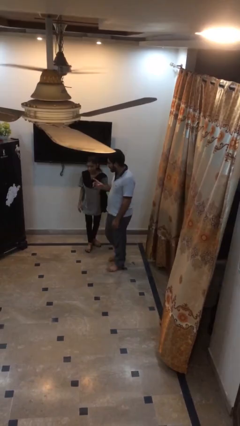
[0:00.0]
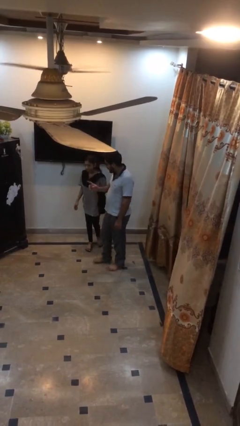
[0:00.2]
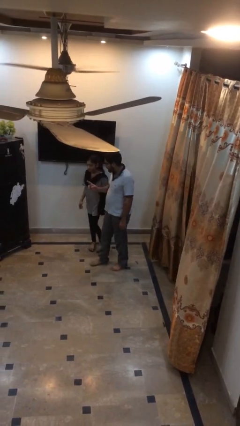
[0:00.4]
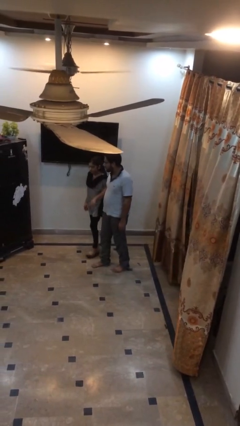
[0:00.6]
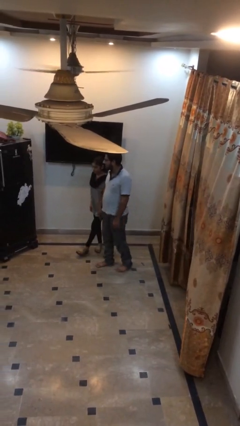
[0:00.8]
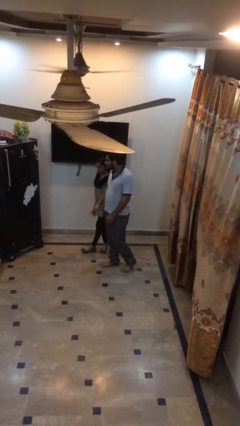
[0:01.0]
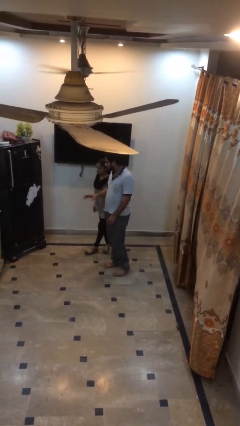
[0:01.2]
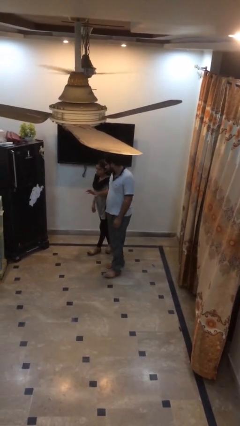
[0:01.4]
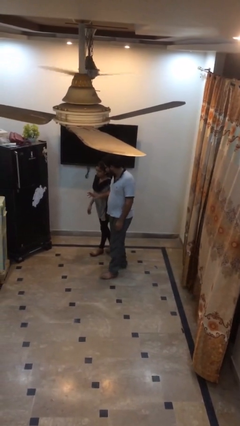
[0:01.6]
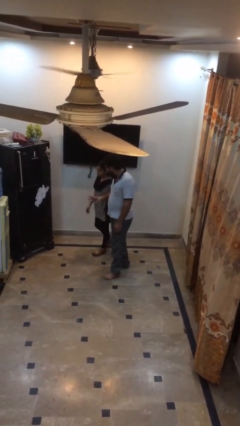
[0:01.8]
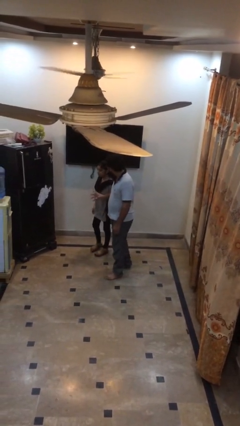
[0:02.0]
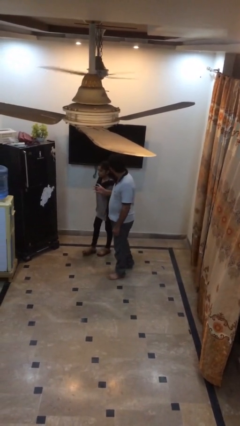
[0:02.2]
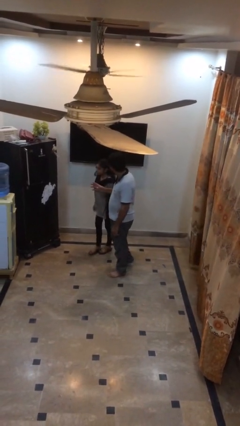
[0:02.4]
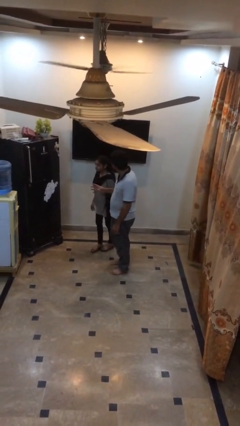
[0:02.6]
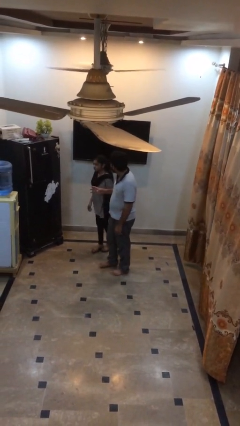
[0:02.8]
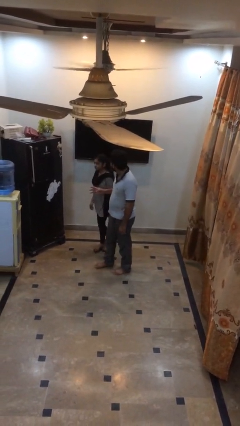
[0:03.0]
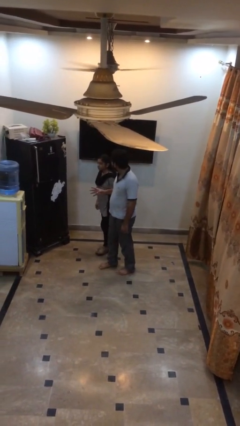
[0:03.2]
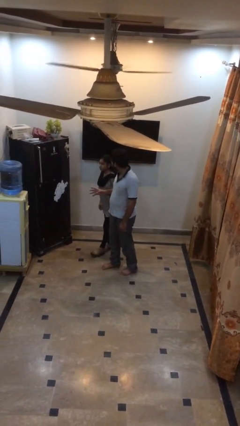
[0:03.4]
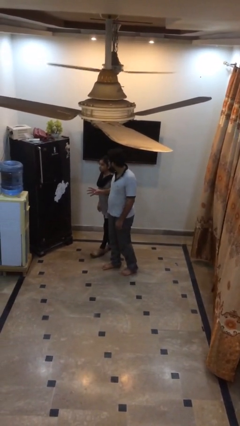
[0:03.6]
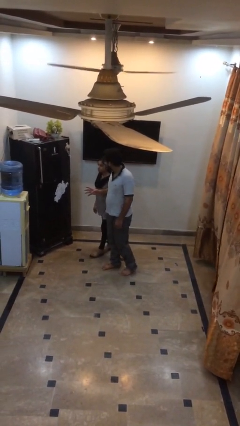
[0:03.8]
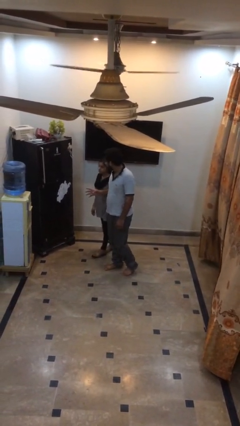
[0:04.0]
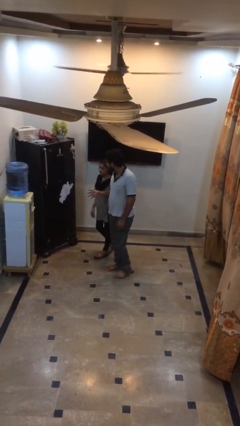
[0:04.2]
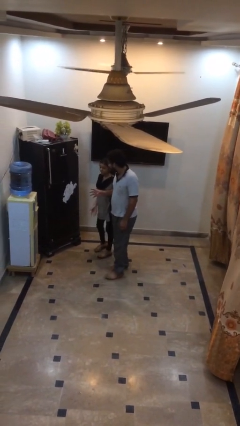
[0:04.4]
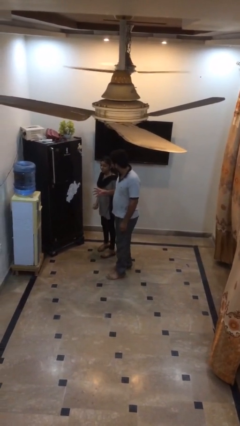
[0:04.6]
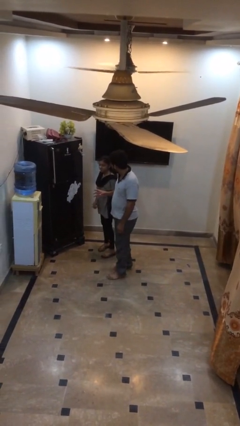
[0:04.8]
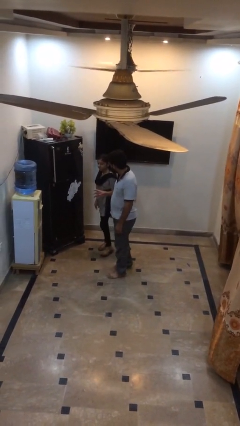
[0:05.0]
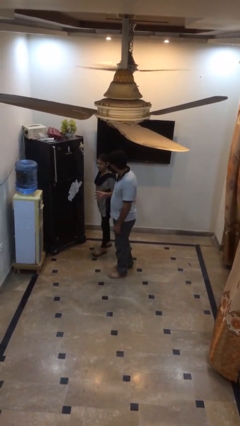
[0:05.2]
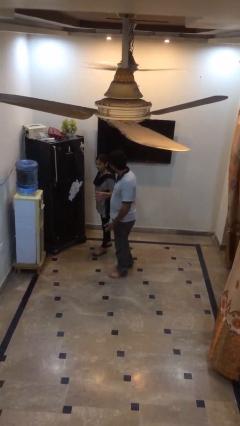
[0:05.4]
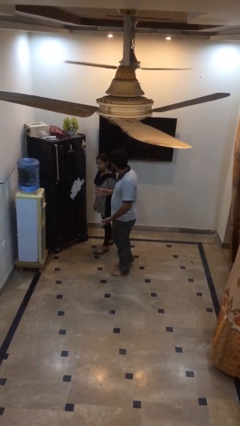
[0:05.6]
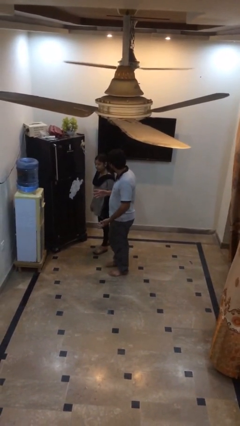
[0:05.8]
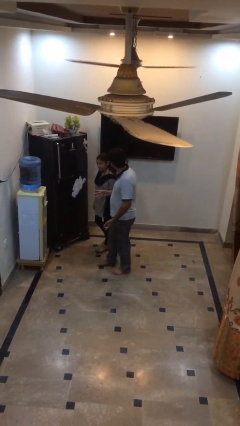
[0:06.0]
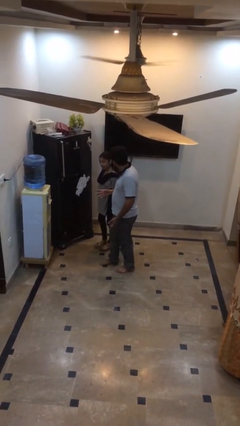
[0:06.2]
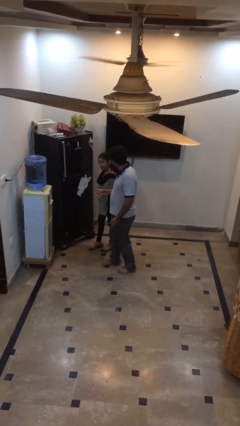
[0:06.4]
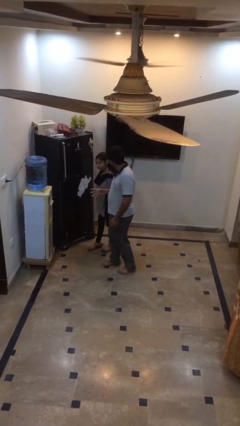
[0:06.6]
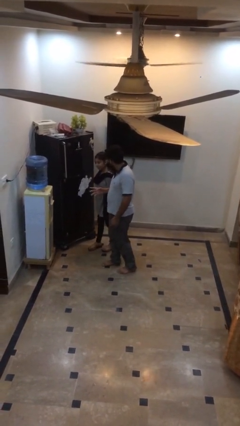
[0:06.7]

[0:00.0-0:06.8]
person talks to person

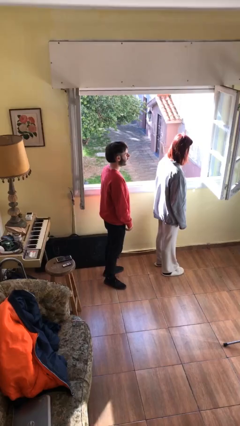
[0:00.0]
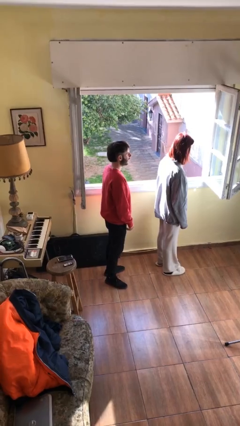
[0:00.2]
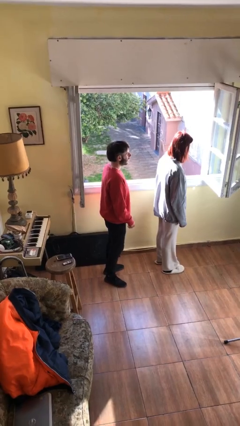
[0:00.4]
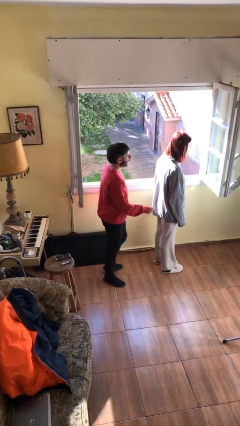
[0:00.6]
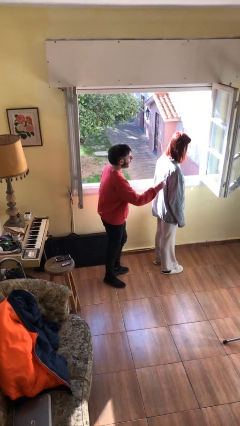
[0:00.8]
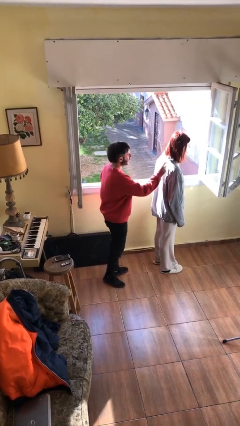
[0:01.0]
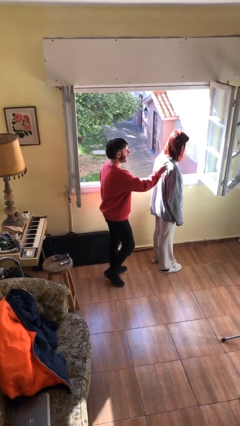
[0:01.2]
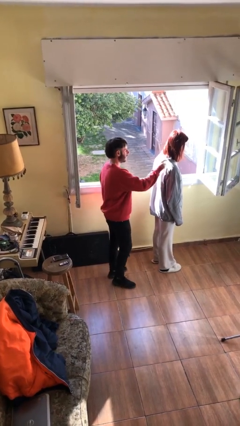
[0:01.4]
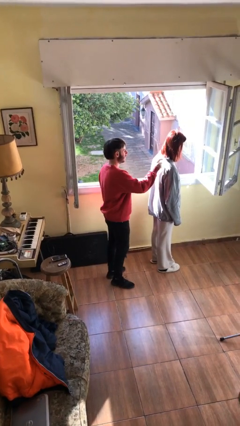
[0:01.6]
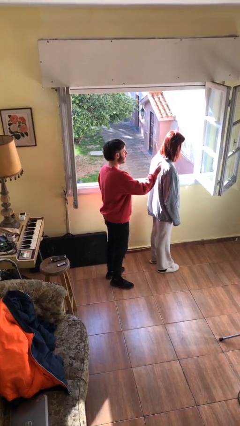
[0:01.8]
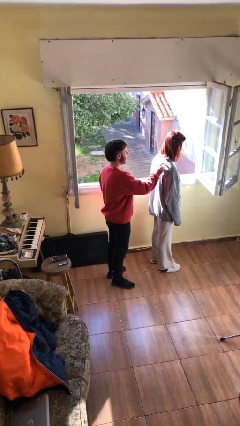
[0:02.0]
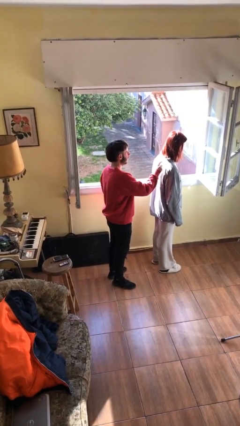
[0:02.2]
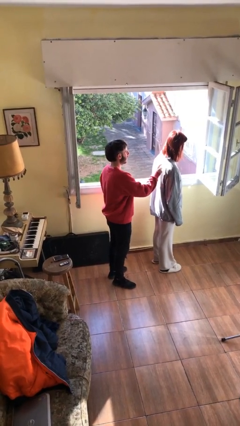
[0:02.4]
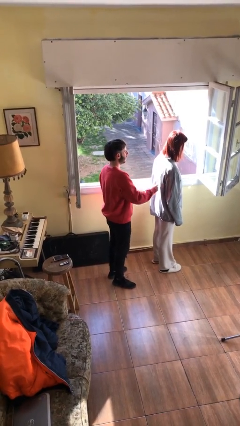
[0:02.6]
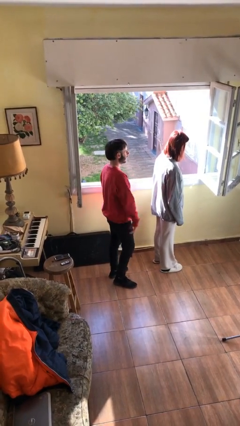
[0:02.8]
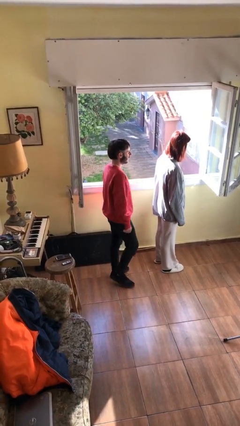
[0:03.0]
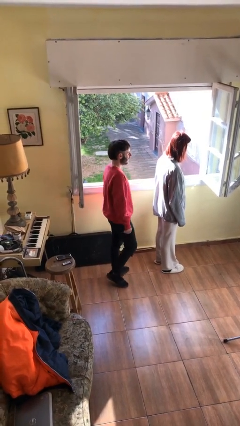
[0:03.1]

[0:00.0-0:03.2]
person touches back of person

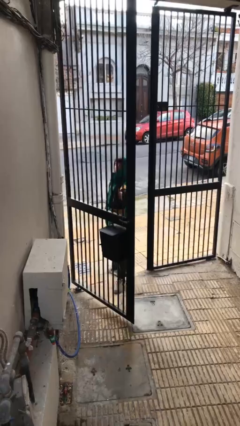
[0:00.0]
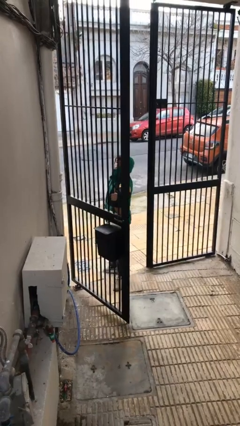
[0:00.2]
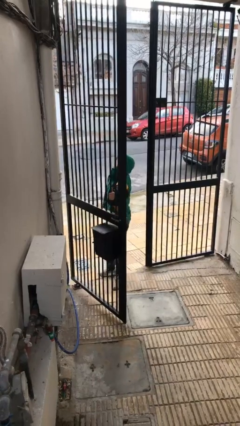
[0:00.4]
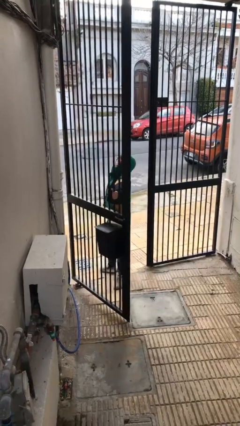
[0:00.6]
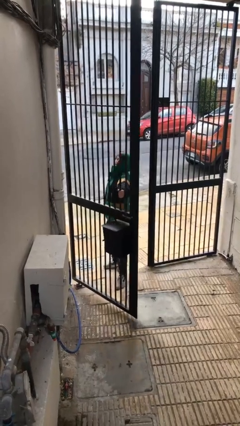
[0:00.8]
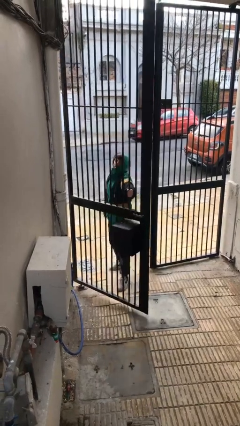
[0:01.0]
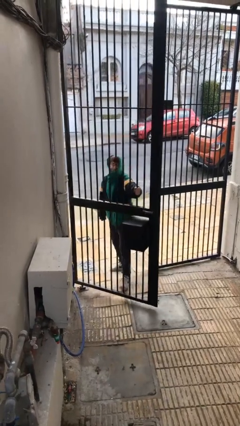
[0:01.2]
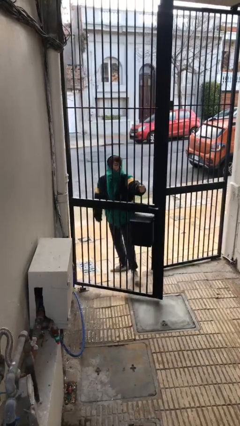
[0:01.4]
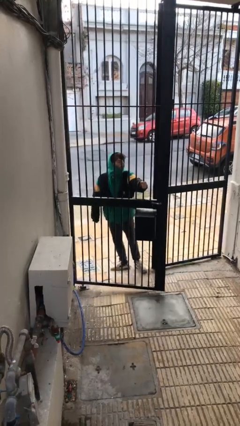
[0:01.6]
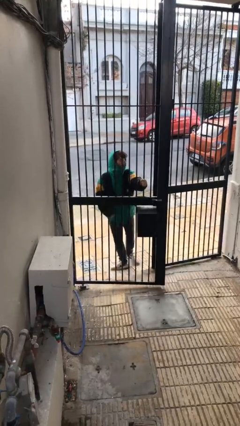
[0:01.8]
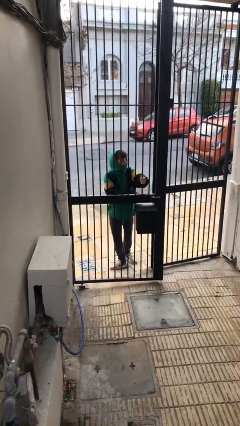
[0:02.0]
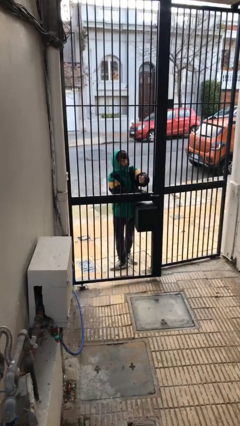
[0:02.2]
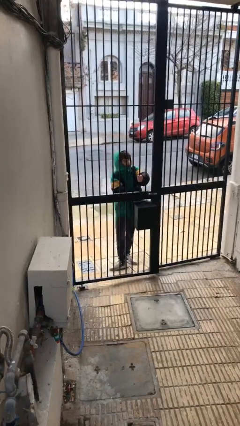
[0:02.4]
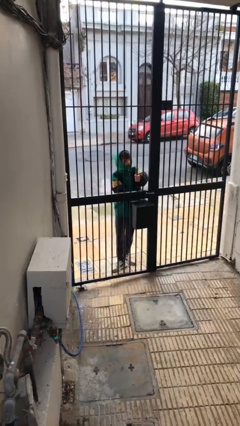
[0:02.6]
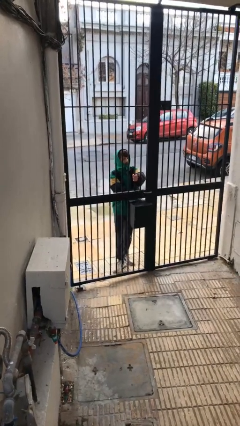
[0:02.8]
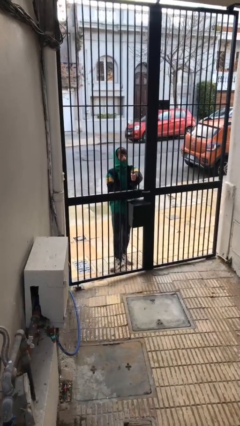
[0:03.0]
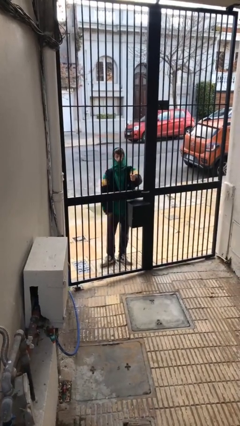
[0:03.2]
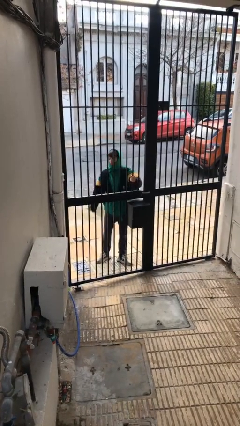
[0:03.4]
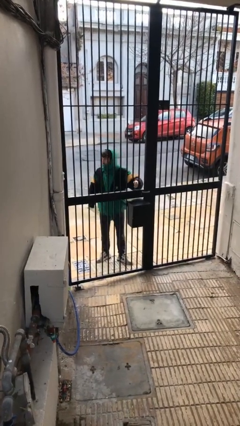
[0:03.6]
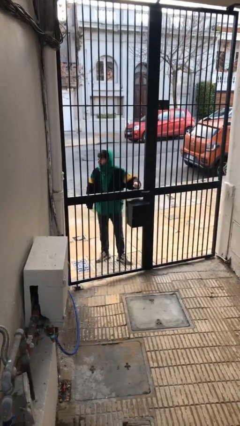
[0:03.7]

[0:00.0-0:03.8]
person closes gate

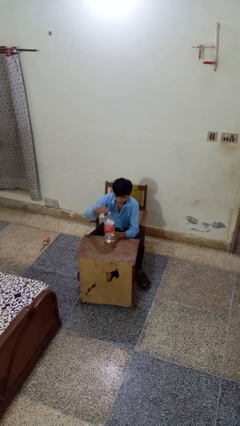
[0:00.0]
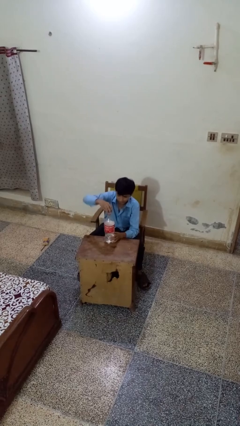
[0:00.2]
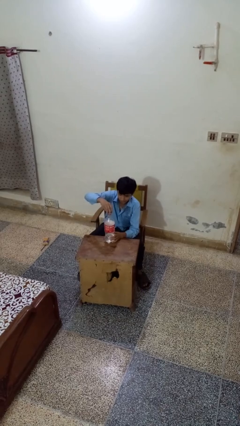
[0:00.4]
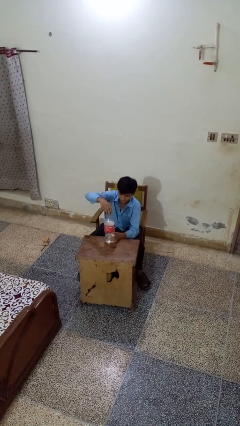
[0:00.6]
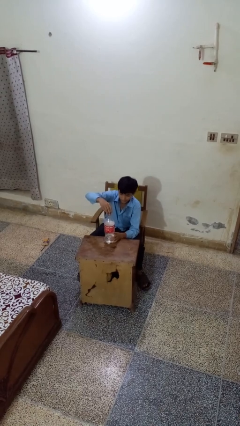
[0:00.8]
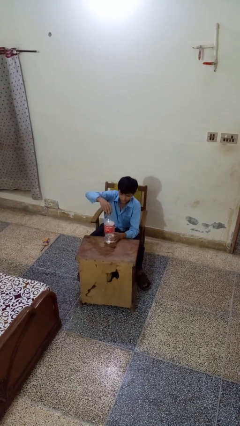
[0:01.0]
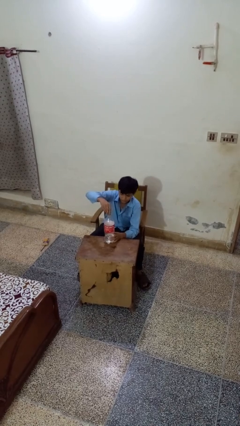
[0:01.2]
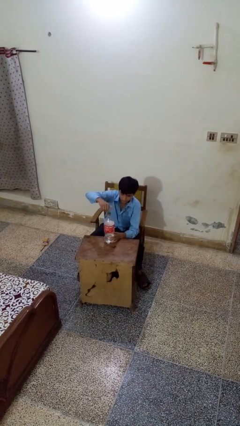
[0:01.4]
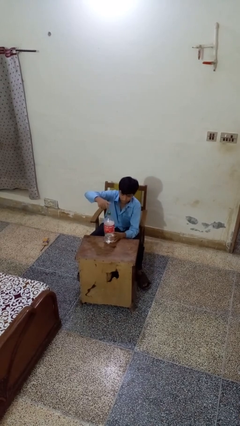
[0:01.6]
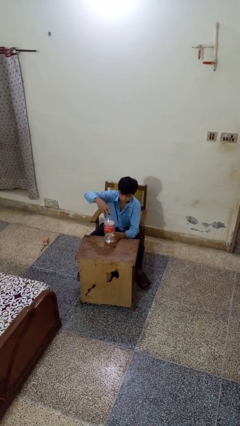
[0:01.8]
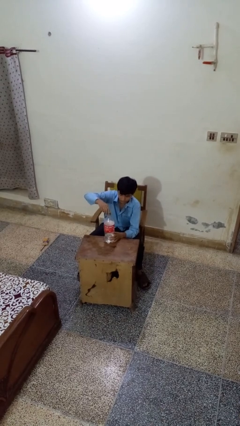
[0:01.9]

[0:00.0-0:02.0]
person screws lid to bottle

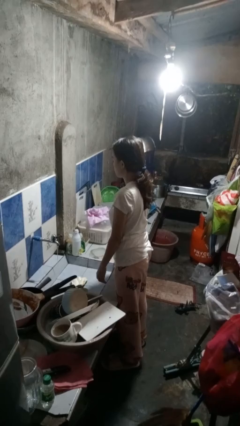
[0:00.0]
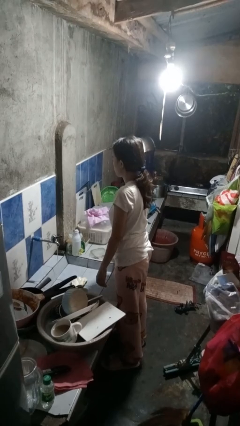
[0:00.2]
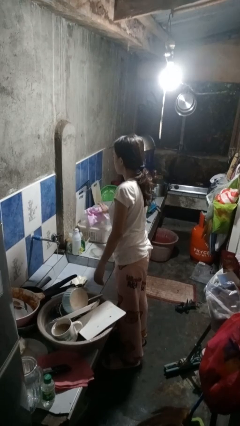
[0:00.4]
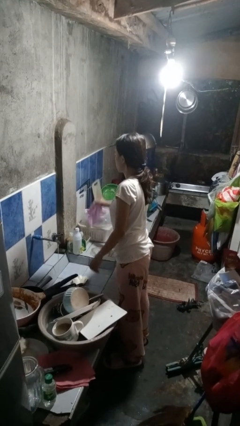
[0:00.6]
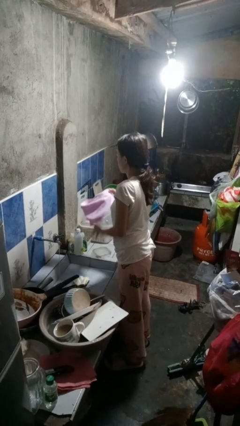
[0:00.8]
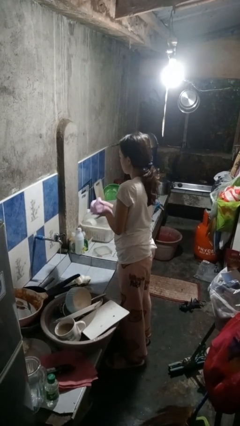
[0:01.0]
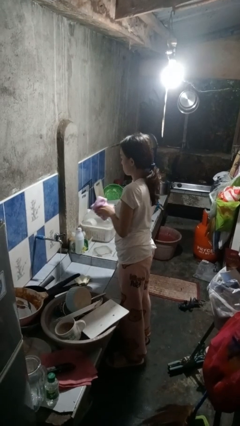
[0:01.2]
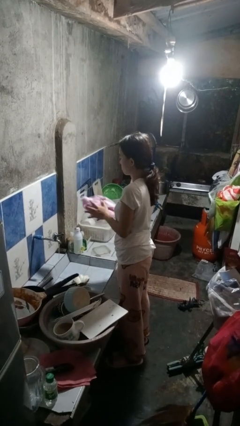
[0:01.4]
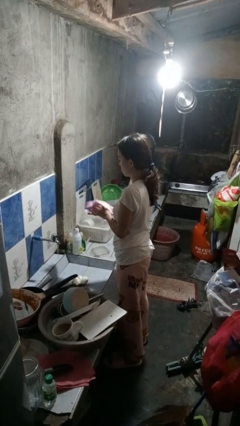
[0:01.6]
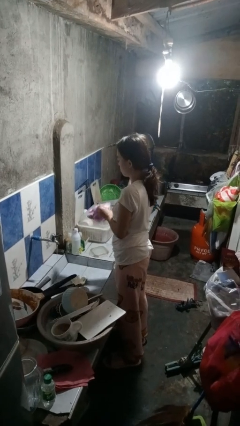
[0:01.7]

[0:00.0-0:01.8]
person dries hands with towel
